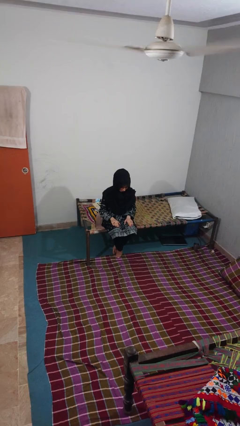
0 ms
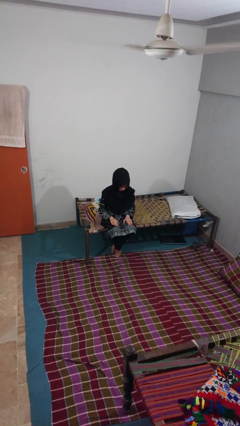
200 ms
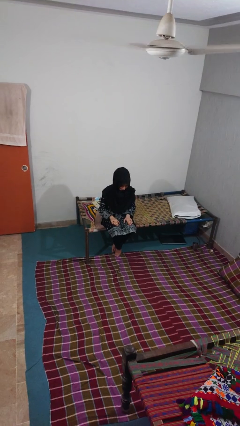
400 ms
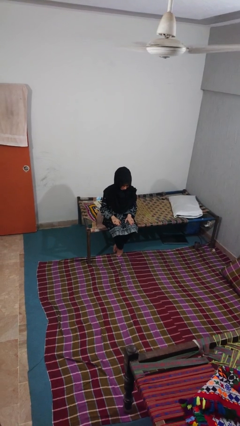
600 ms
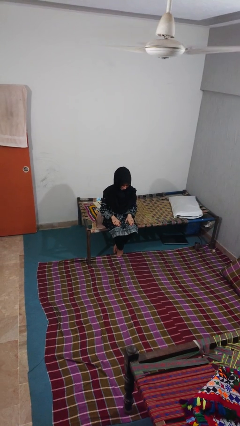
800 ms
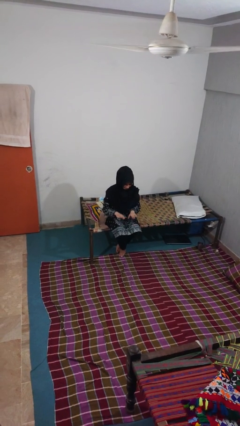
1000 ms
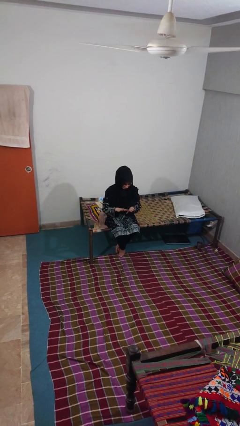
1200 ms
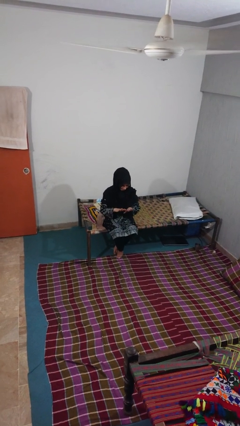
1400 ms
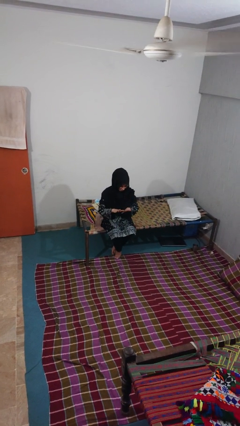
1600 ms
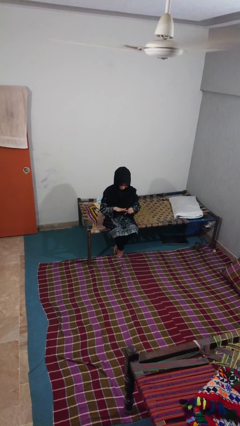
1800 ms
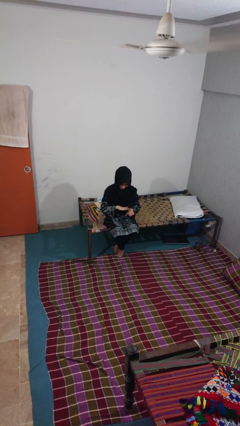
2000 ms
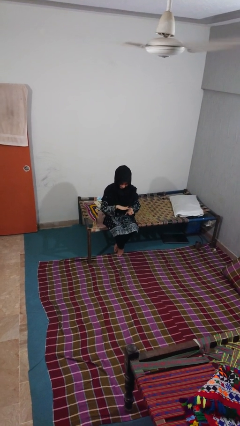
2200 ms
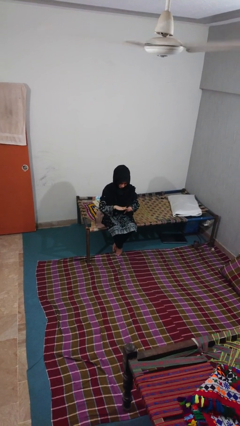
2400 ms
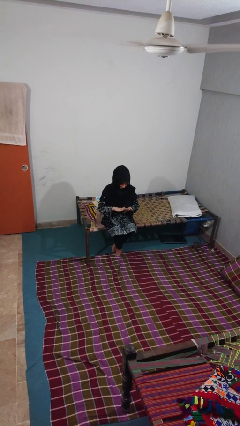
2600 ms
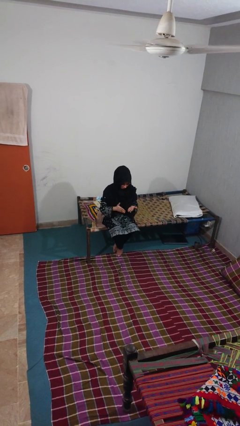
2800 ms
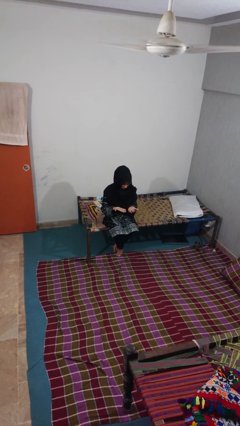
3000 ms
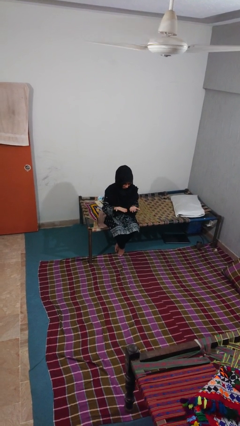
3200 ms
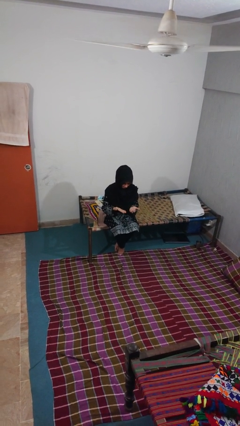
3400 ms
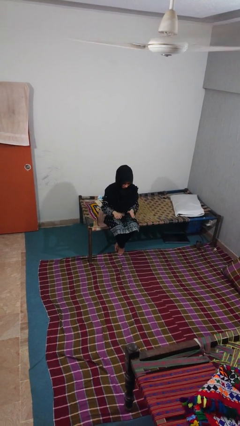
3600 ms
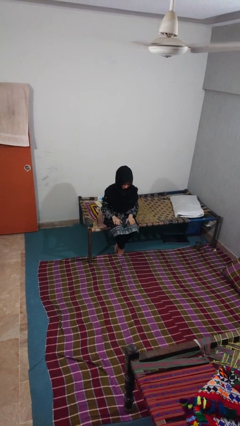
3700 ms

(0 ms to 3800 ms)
person looks at hands in lap

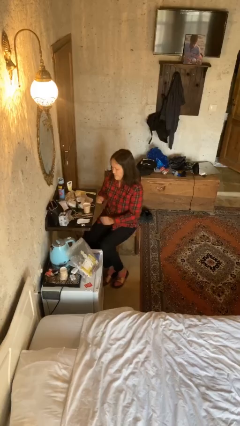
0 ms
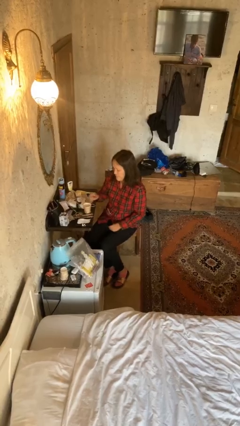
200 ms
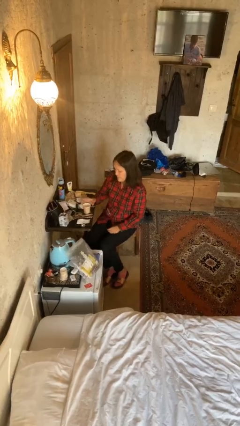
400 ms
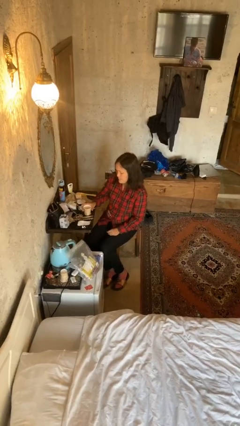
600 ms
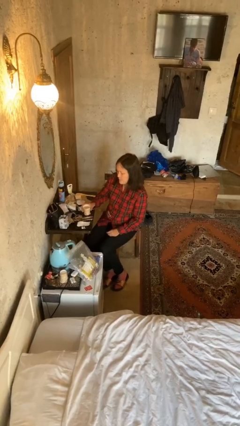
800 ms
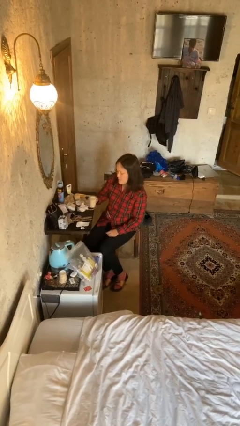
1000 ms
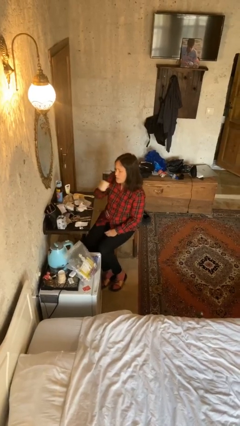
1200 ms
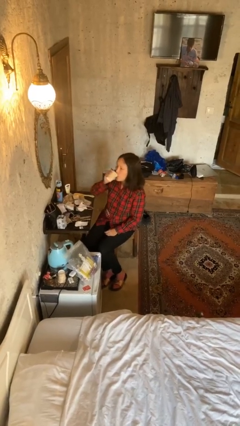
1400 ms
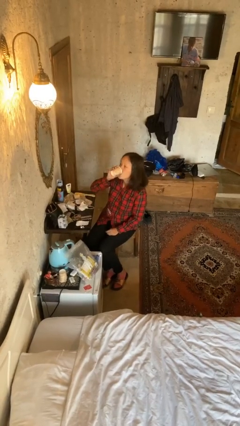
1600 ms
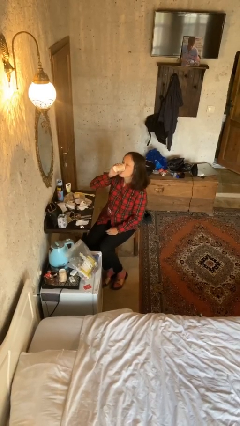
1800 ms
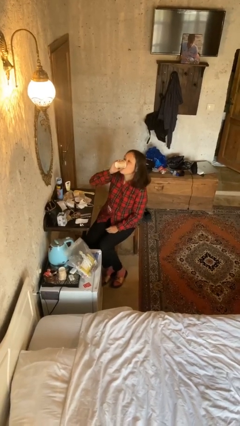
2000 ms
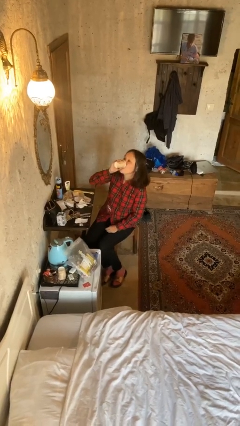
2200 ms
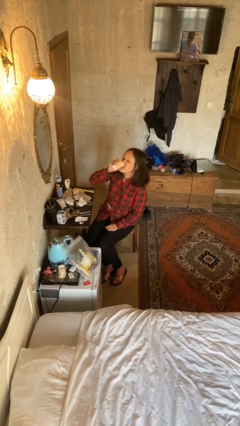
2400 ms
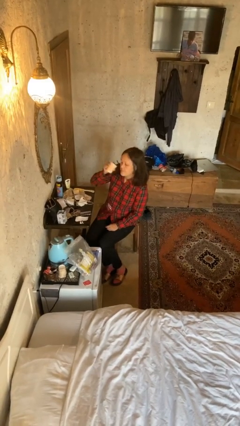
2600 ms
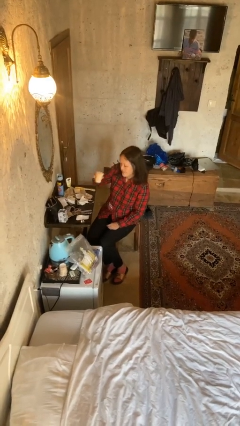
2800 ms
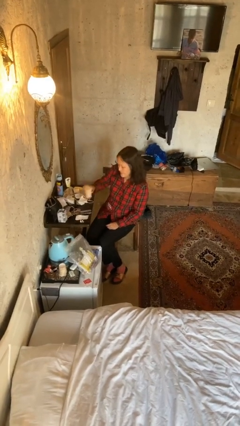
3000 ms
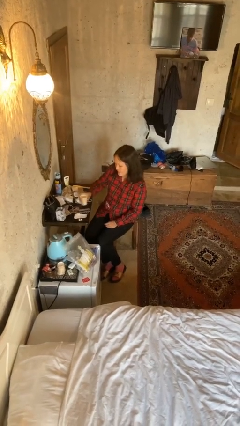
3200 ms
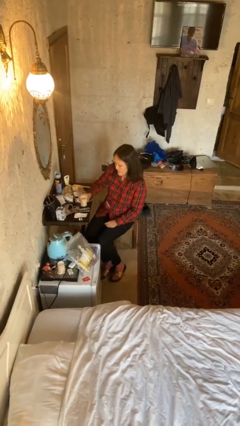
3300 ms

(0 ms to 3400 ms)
person drinks from cup

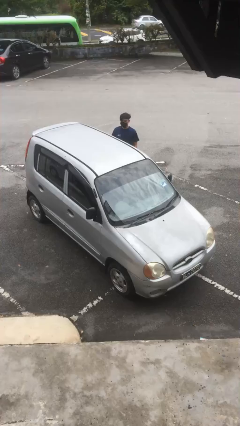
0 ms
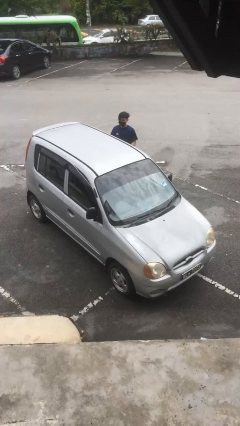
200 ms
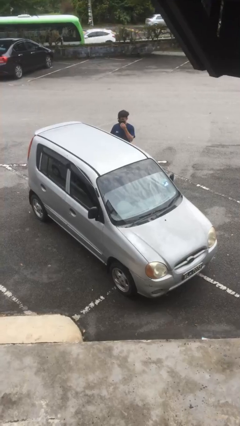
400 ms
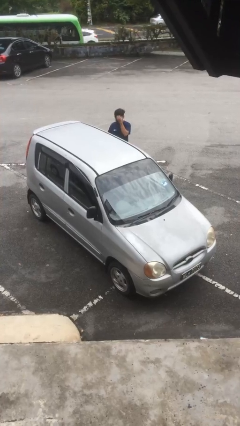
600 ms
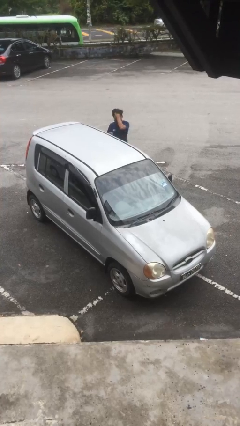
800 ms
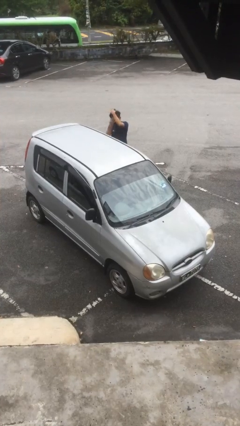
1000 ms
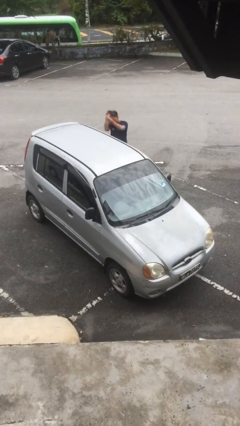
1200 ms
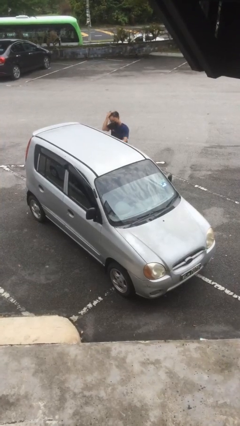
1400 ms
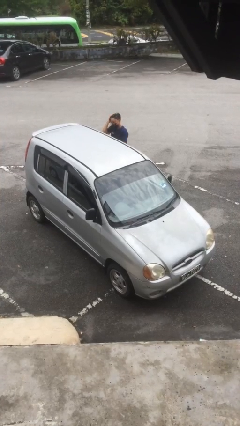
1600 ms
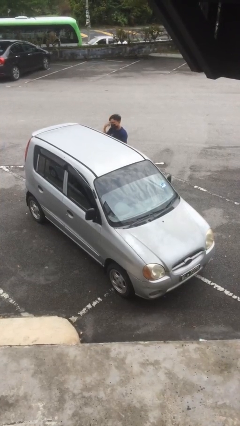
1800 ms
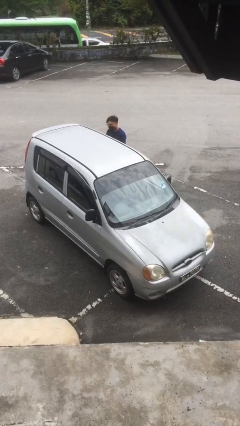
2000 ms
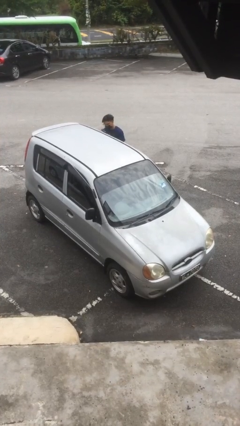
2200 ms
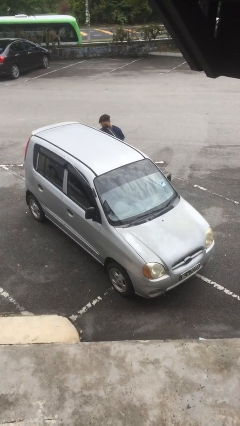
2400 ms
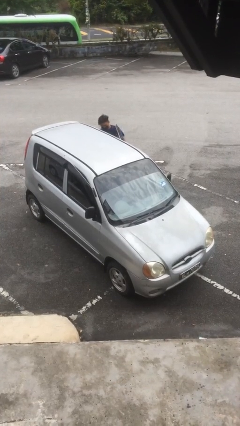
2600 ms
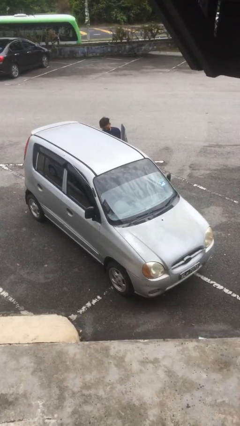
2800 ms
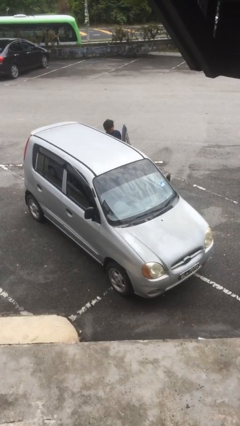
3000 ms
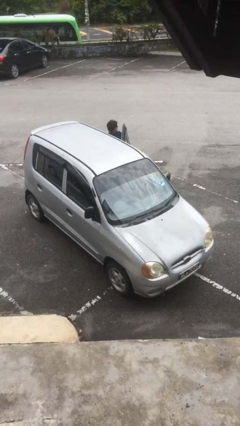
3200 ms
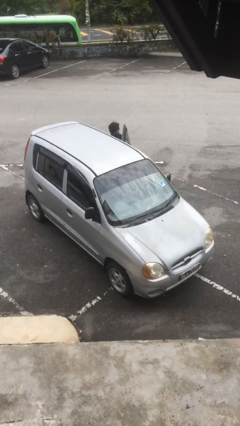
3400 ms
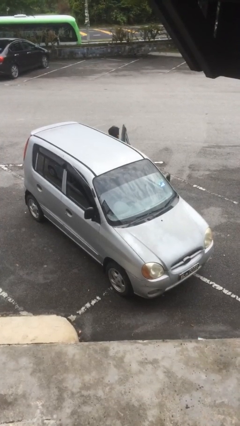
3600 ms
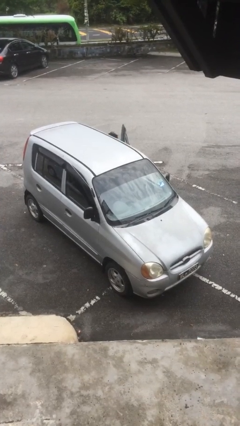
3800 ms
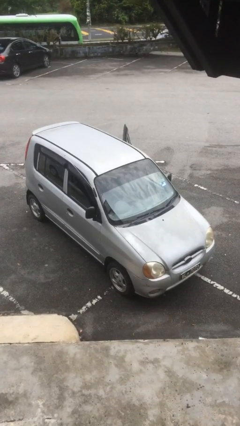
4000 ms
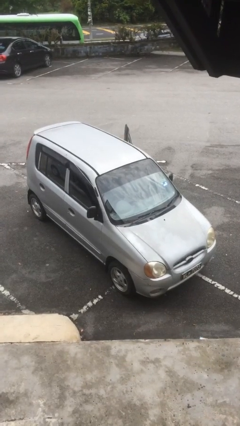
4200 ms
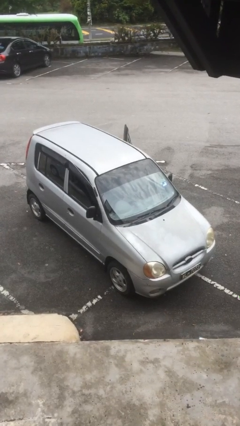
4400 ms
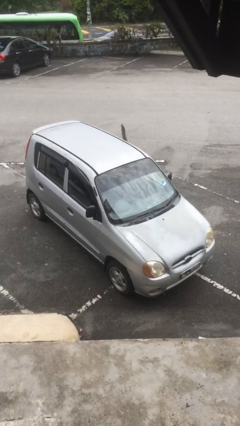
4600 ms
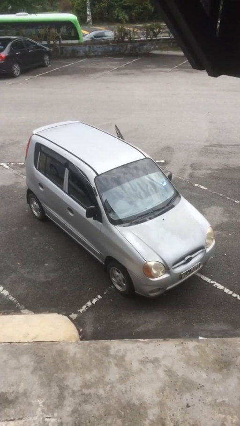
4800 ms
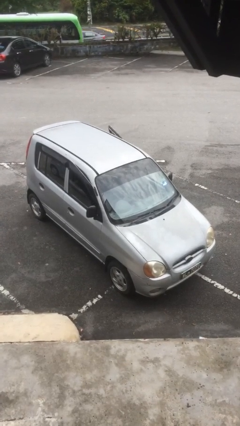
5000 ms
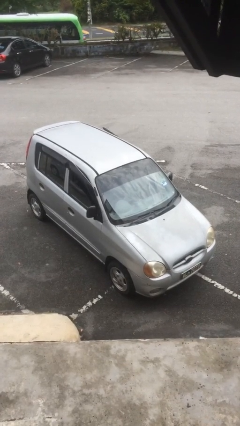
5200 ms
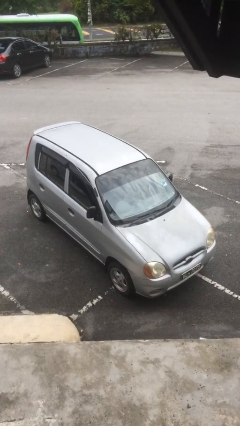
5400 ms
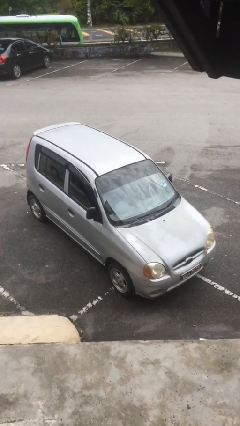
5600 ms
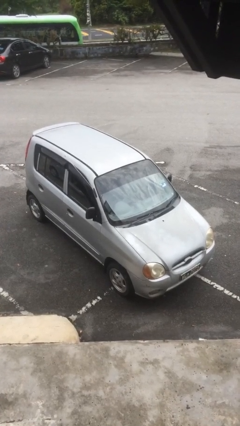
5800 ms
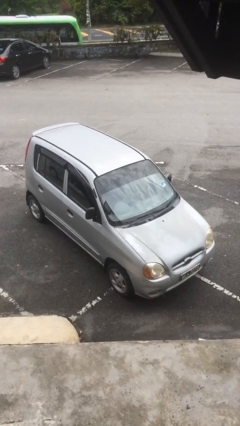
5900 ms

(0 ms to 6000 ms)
car picks up person

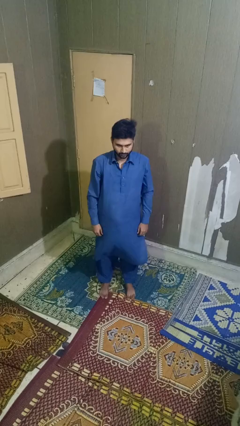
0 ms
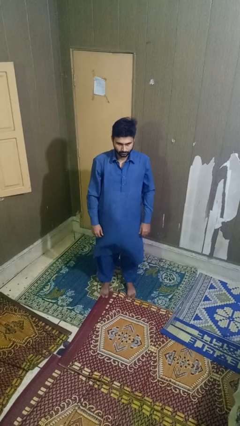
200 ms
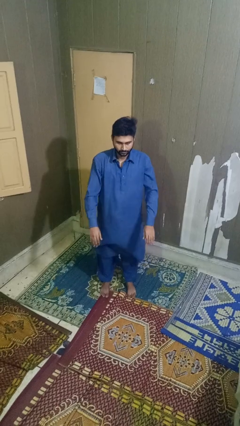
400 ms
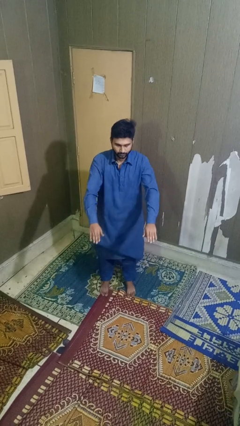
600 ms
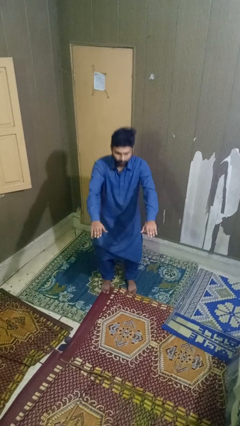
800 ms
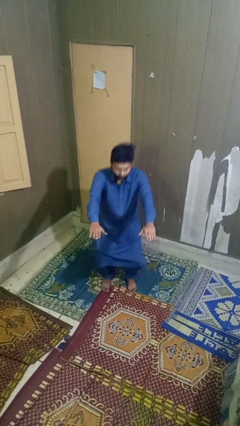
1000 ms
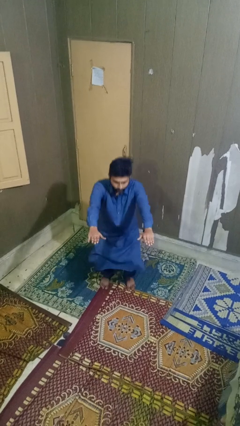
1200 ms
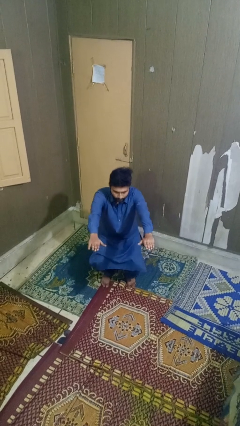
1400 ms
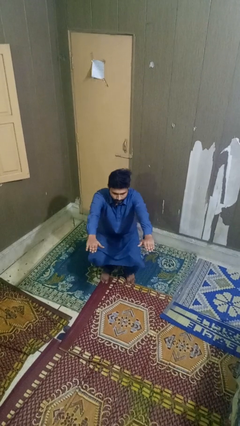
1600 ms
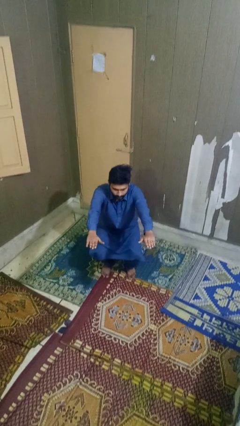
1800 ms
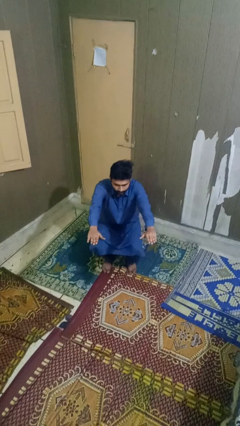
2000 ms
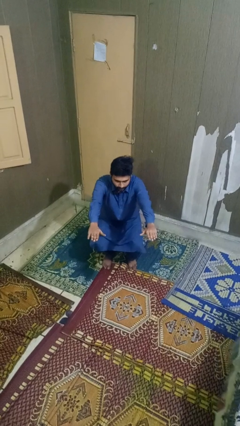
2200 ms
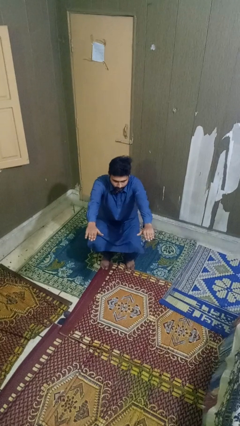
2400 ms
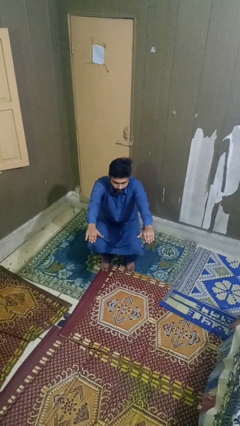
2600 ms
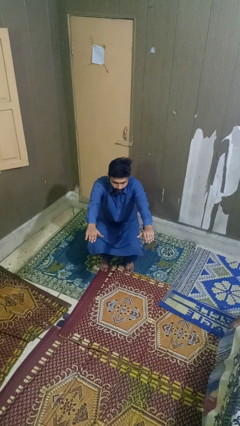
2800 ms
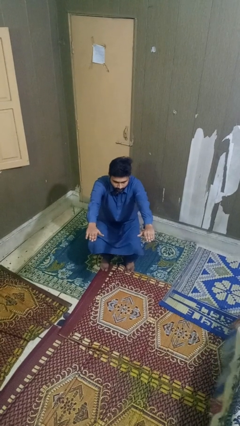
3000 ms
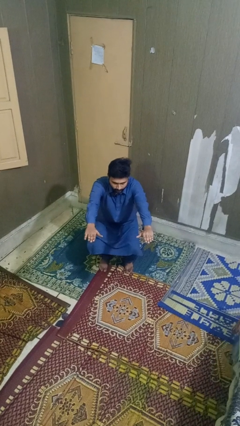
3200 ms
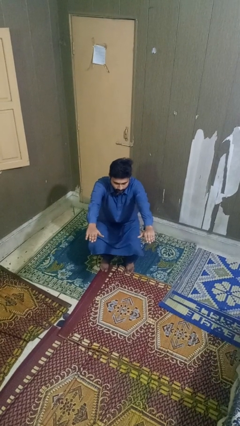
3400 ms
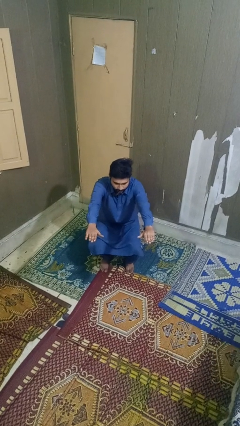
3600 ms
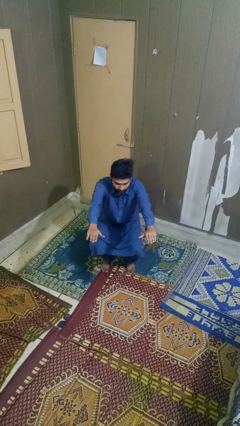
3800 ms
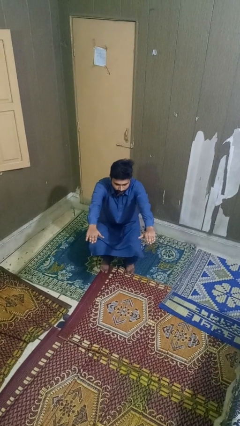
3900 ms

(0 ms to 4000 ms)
person squats

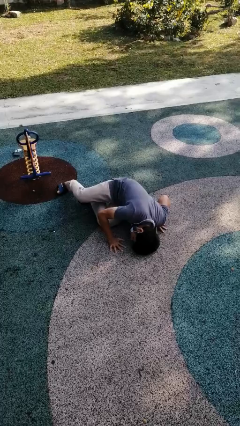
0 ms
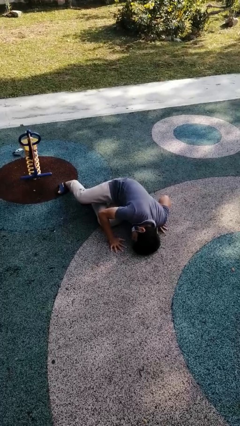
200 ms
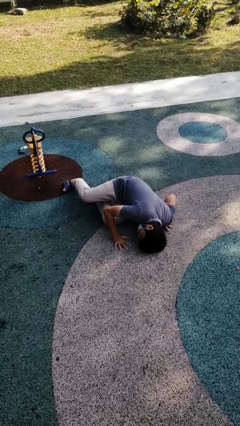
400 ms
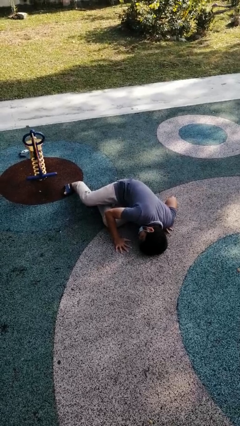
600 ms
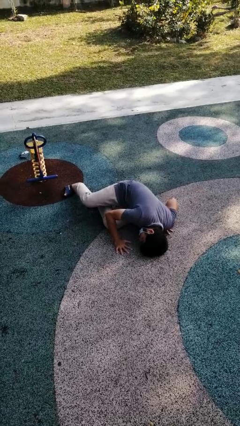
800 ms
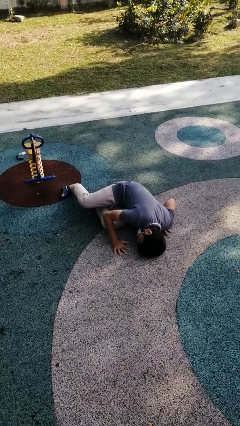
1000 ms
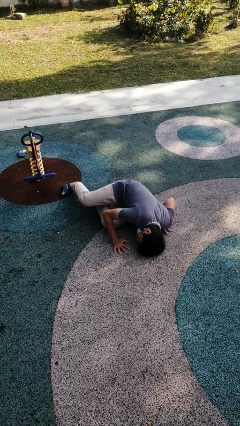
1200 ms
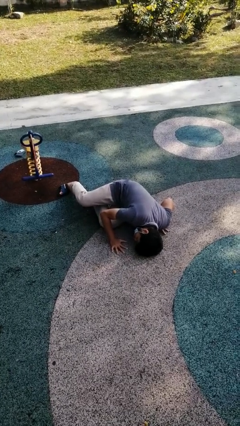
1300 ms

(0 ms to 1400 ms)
person lies down on floor
